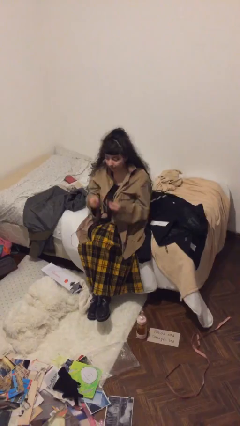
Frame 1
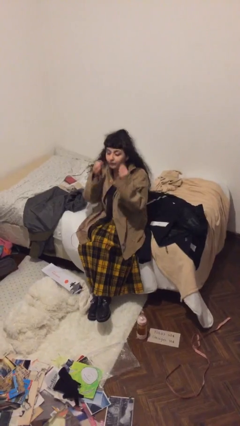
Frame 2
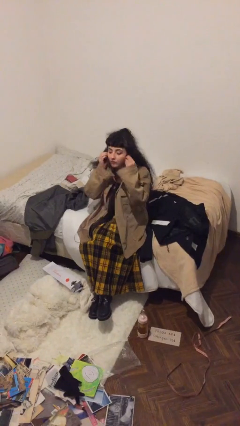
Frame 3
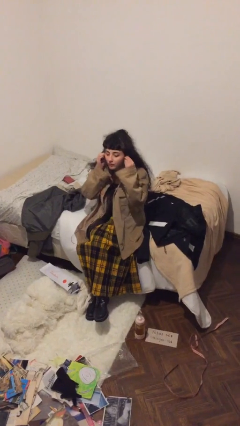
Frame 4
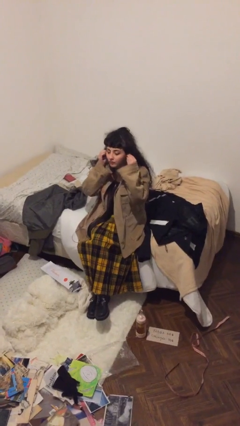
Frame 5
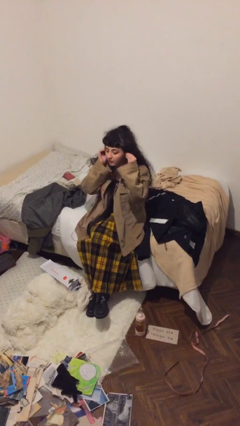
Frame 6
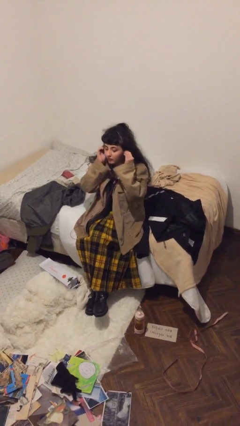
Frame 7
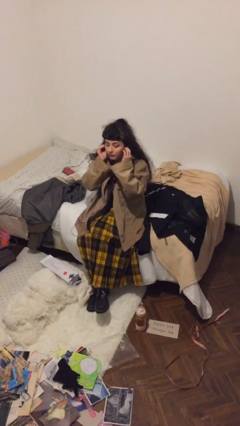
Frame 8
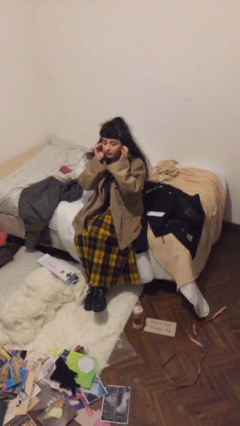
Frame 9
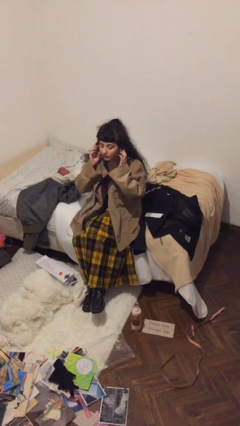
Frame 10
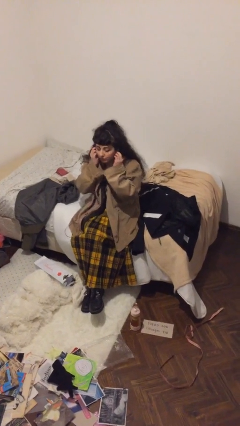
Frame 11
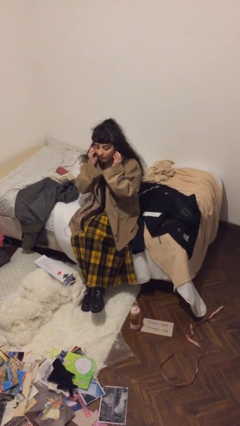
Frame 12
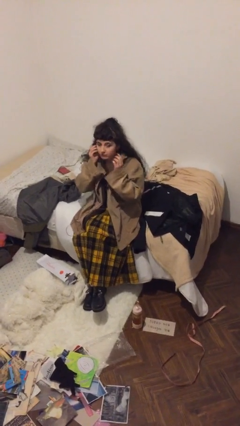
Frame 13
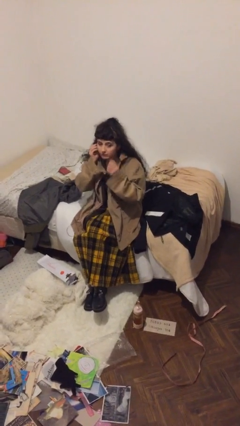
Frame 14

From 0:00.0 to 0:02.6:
person puts on headphones

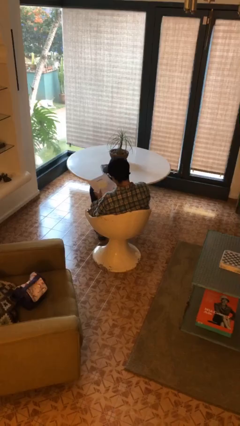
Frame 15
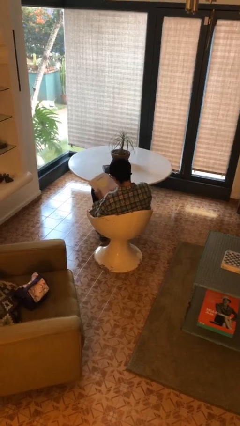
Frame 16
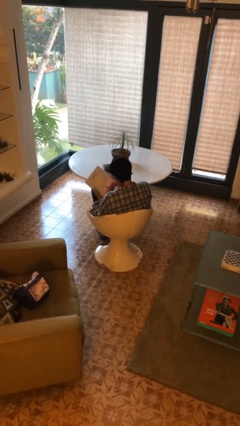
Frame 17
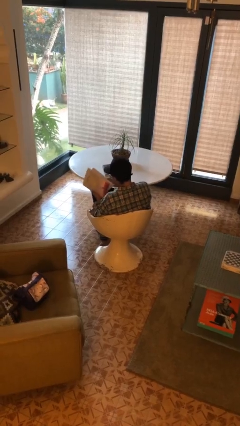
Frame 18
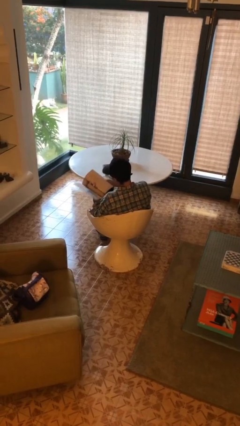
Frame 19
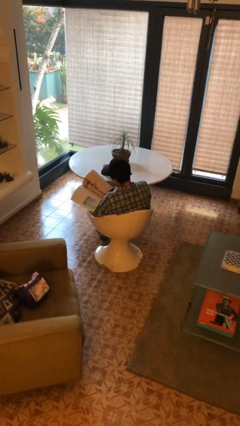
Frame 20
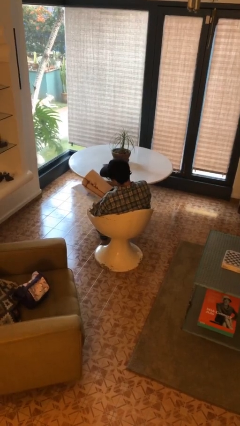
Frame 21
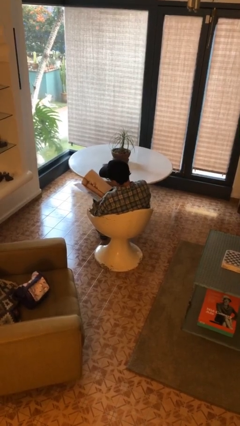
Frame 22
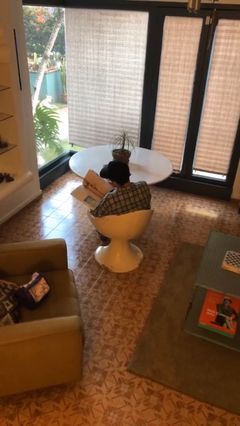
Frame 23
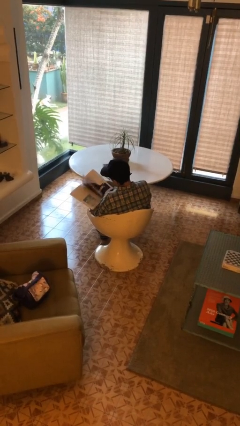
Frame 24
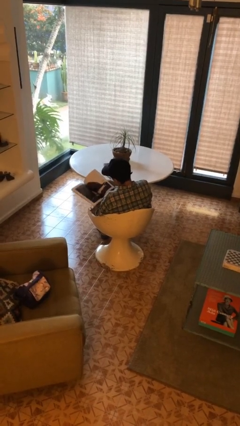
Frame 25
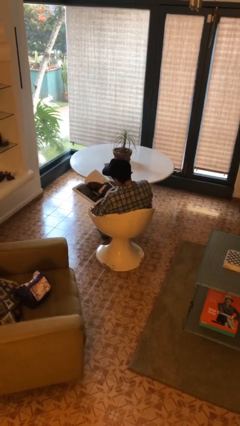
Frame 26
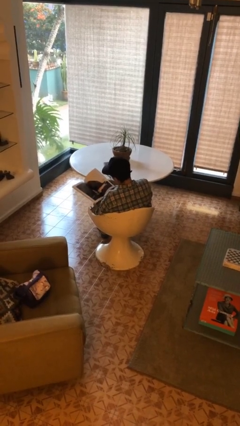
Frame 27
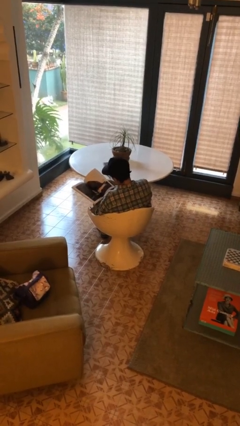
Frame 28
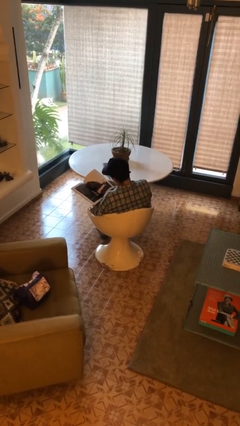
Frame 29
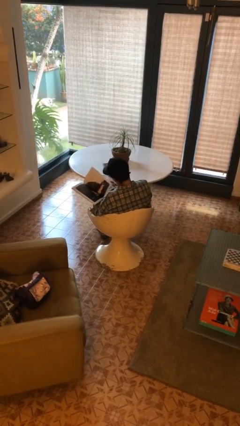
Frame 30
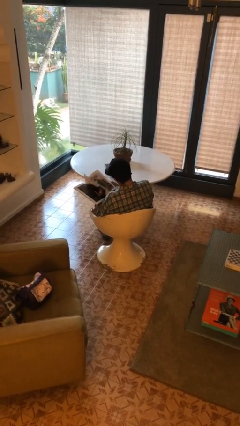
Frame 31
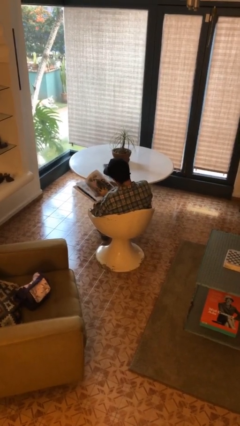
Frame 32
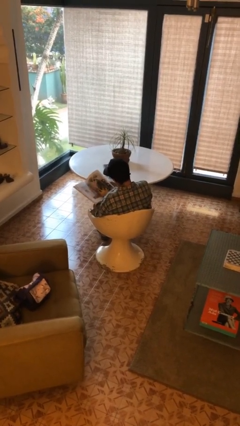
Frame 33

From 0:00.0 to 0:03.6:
person reads magazine

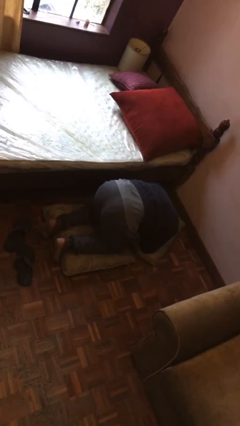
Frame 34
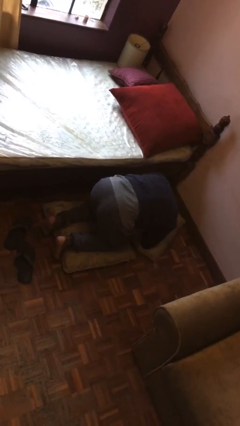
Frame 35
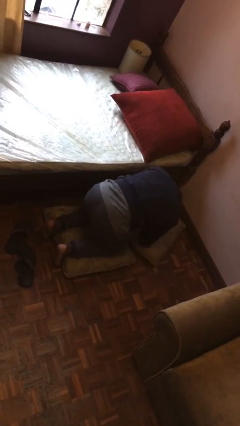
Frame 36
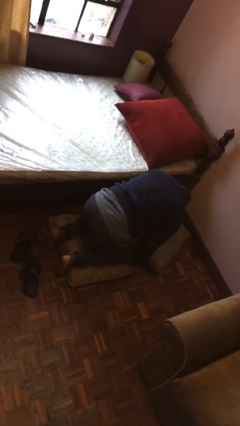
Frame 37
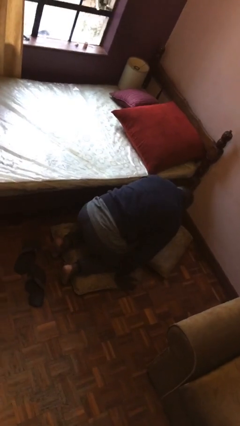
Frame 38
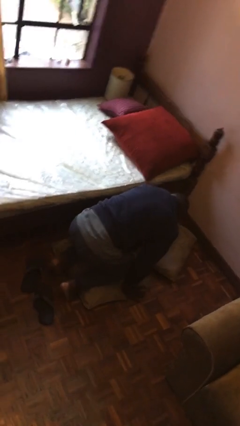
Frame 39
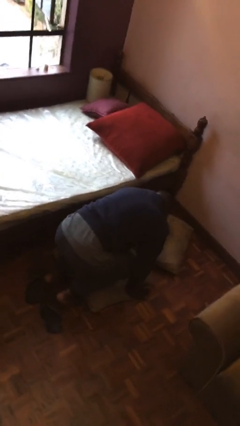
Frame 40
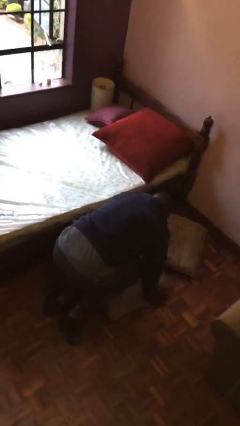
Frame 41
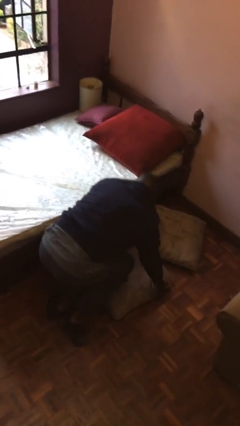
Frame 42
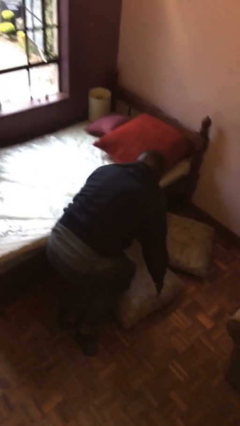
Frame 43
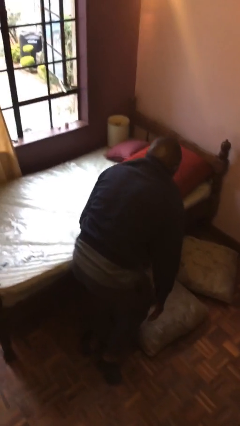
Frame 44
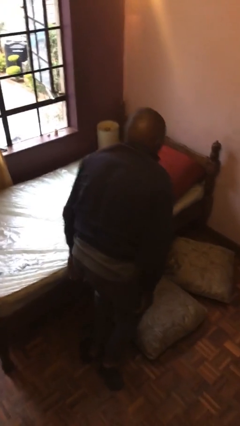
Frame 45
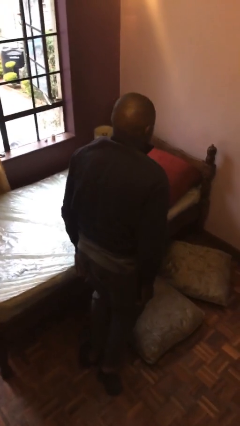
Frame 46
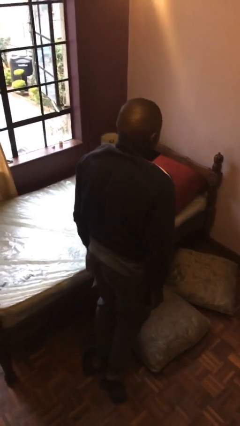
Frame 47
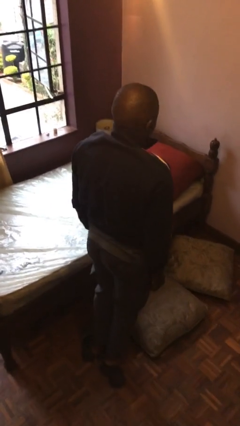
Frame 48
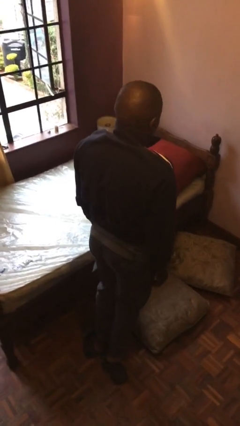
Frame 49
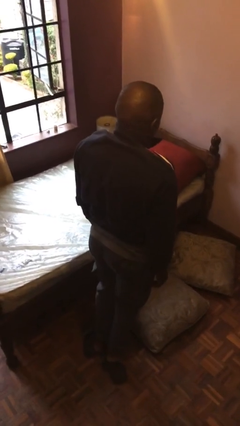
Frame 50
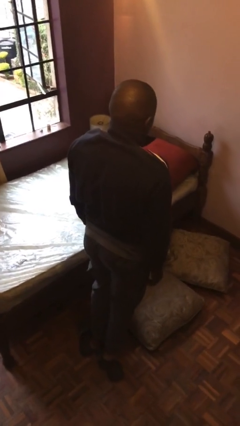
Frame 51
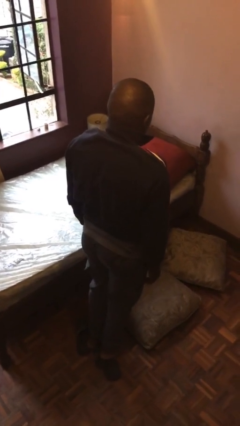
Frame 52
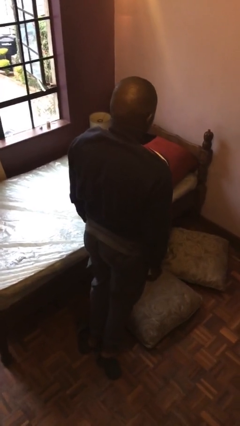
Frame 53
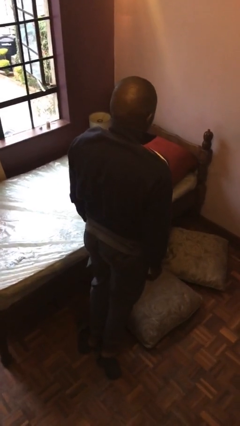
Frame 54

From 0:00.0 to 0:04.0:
person stands up from floor

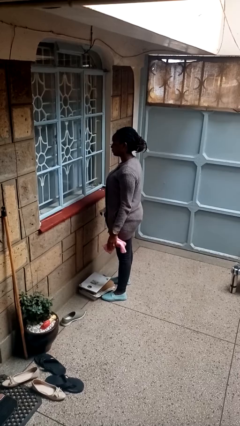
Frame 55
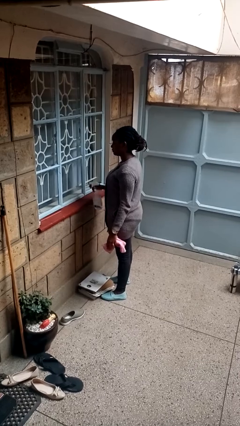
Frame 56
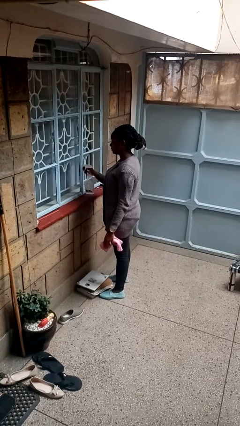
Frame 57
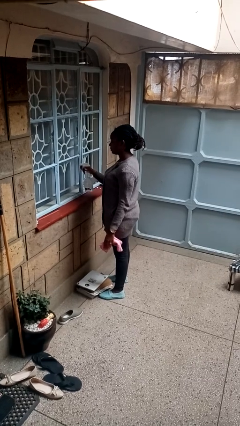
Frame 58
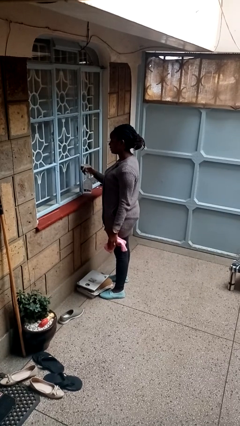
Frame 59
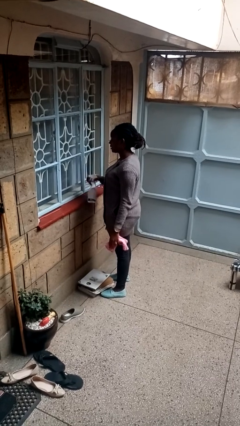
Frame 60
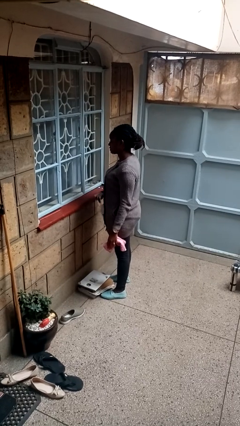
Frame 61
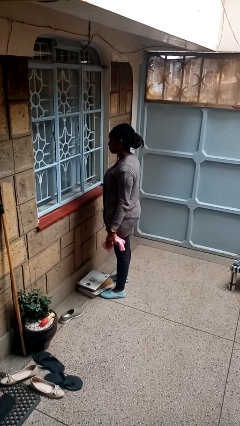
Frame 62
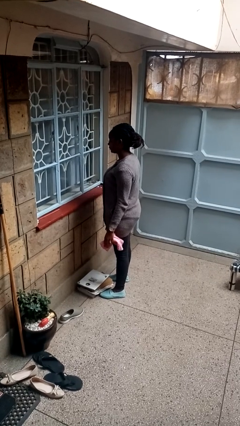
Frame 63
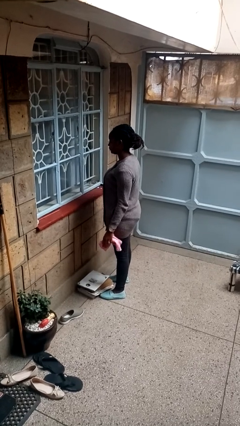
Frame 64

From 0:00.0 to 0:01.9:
person sprays from bottle

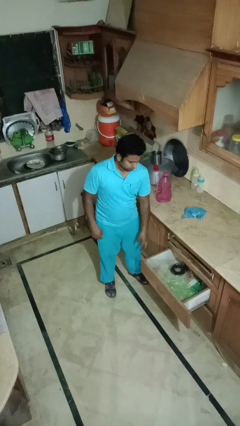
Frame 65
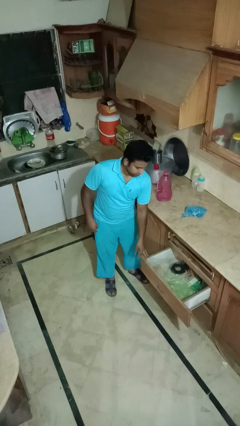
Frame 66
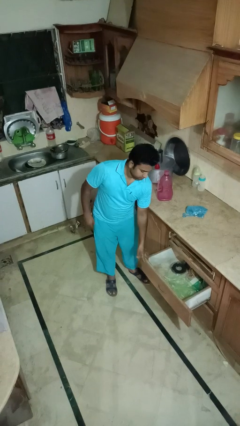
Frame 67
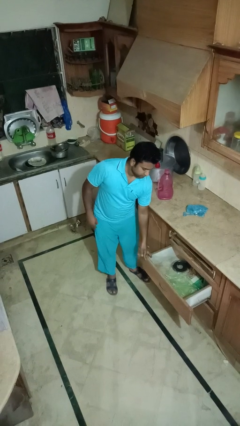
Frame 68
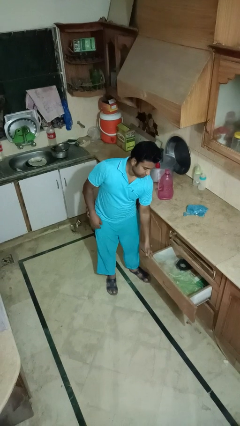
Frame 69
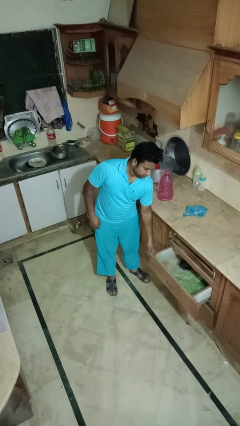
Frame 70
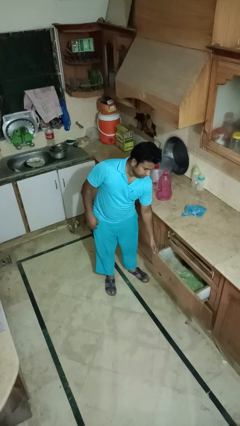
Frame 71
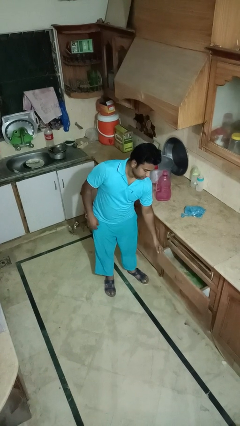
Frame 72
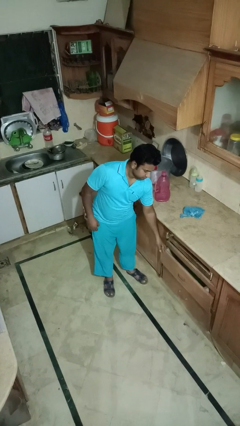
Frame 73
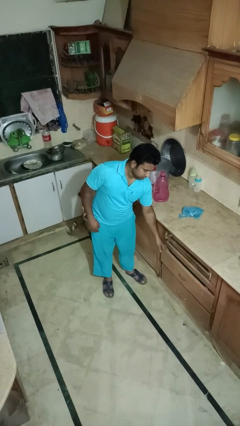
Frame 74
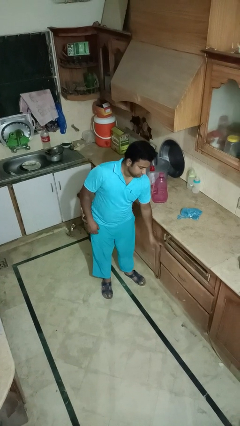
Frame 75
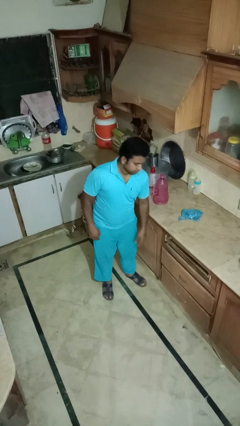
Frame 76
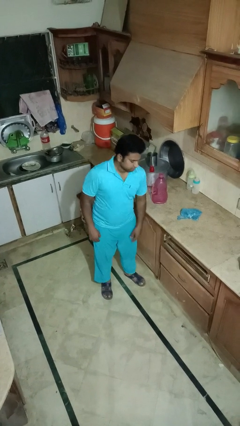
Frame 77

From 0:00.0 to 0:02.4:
person closes kitchen drawer

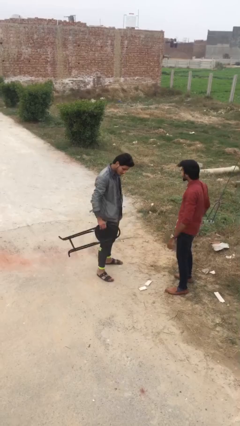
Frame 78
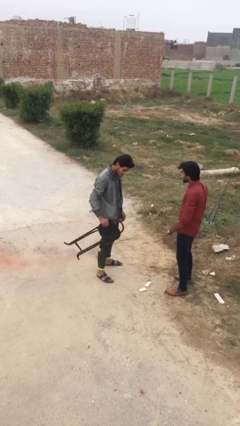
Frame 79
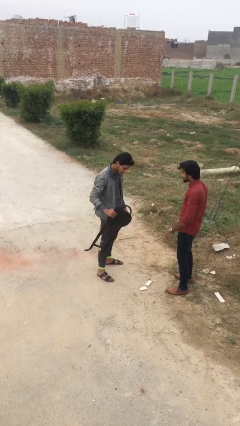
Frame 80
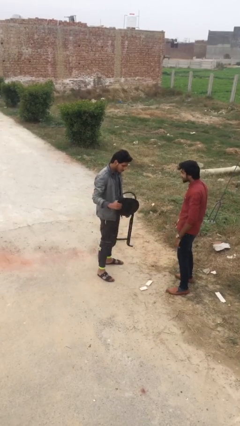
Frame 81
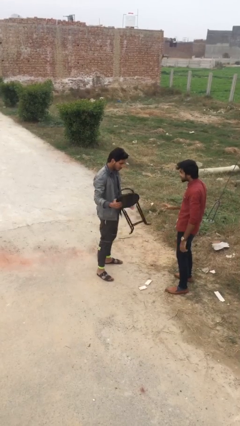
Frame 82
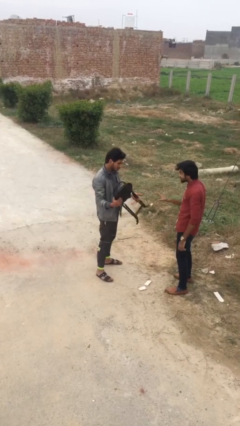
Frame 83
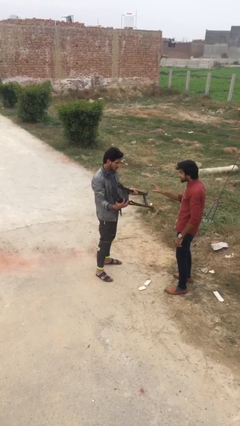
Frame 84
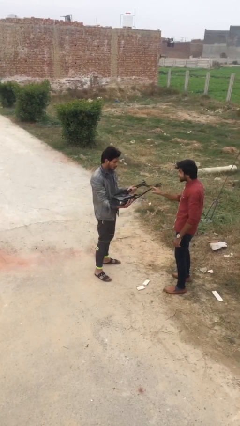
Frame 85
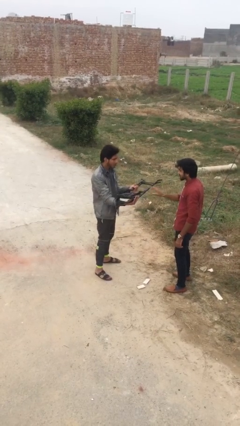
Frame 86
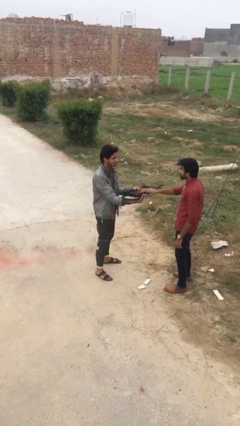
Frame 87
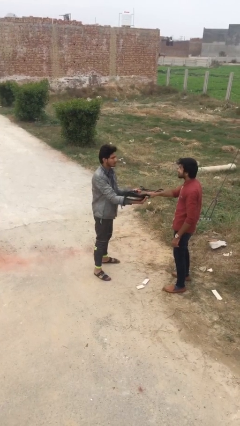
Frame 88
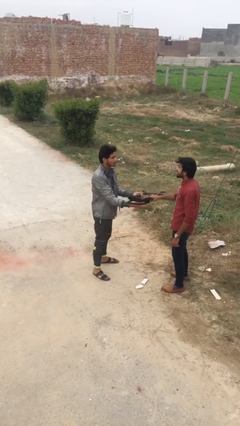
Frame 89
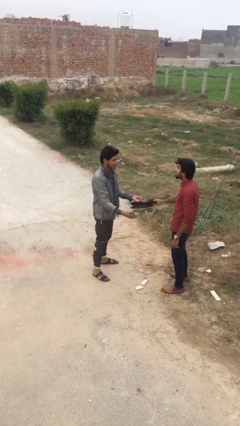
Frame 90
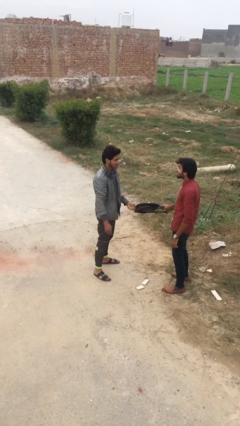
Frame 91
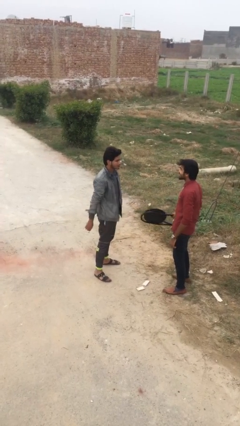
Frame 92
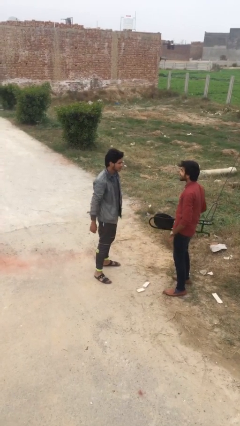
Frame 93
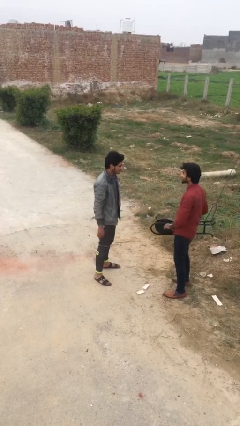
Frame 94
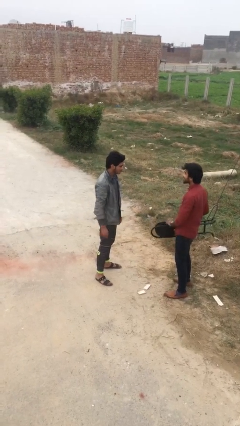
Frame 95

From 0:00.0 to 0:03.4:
person transfers object to person
